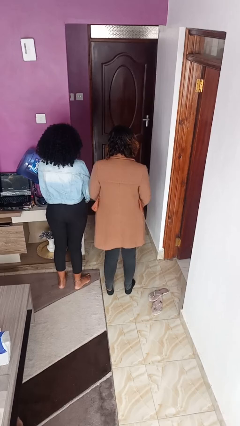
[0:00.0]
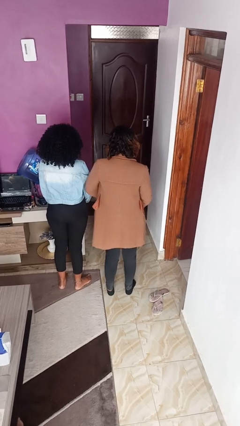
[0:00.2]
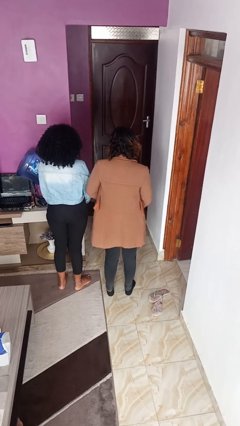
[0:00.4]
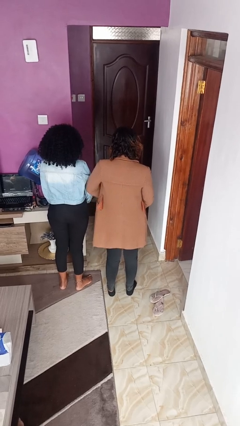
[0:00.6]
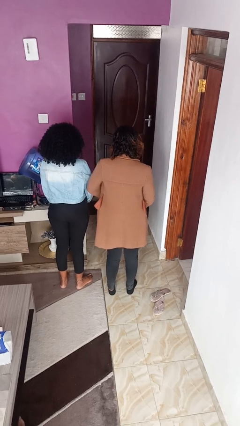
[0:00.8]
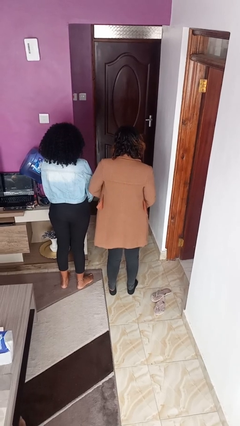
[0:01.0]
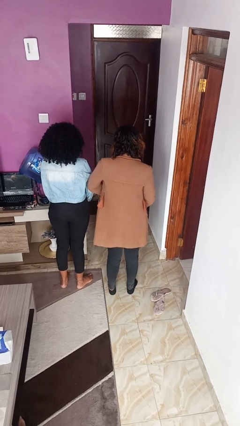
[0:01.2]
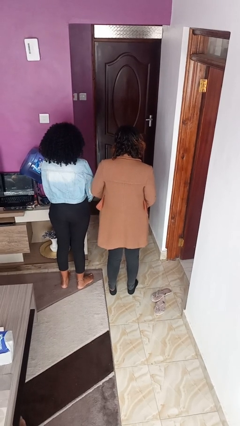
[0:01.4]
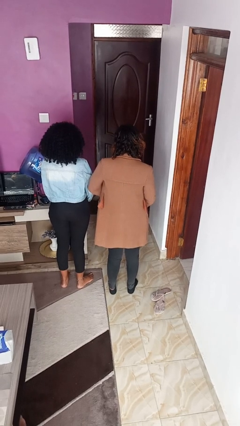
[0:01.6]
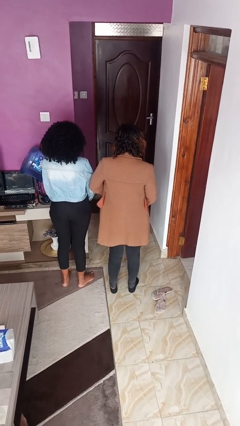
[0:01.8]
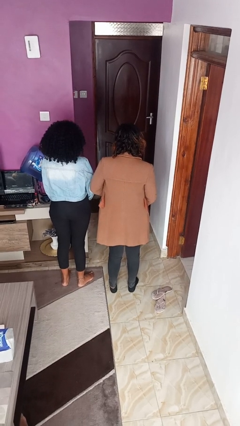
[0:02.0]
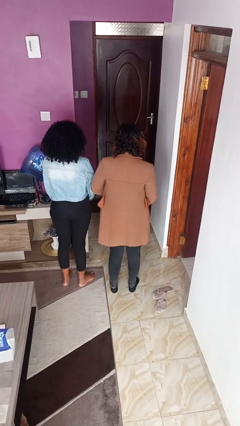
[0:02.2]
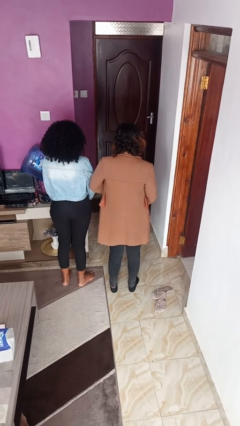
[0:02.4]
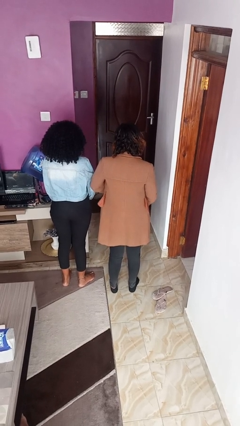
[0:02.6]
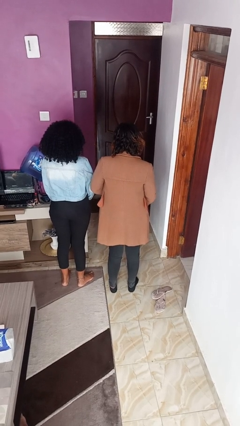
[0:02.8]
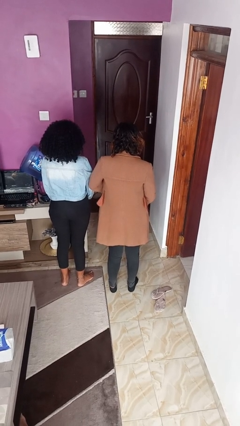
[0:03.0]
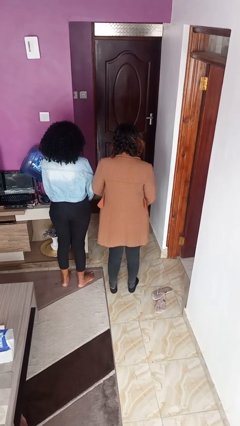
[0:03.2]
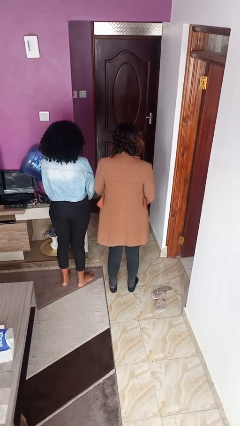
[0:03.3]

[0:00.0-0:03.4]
person nudges person with elbow

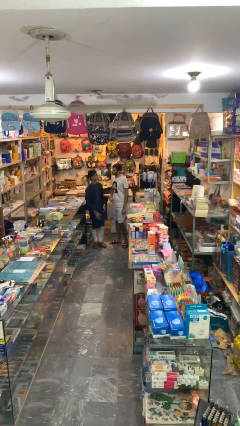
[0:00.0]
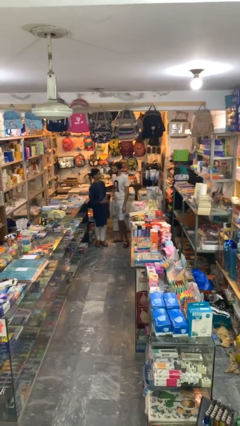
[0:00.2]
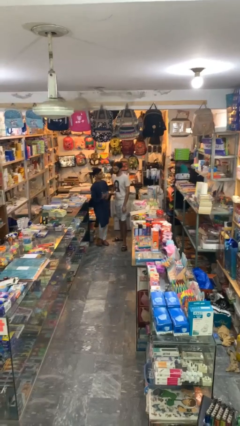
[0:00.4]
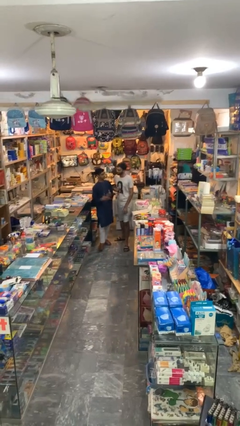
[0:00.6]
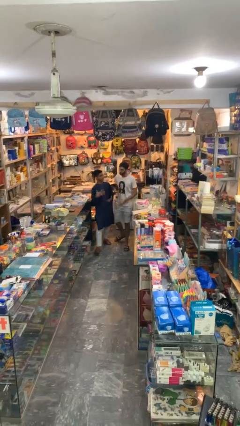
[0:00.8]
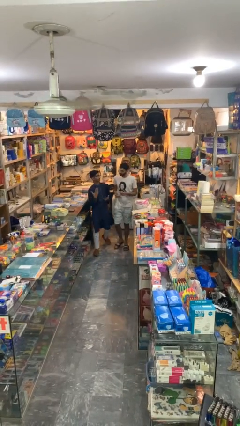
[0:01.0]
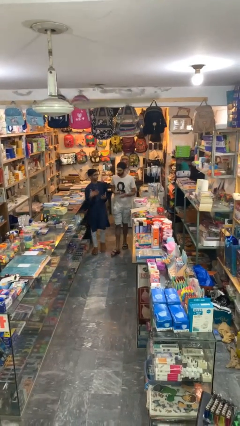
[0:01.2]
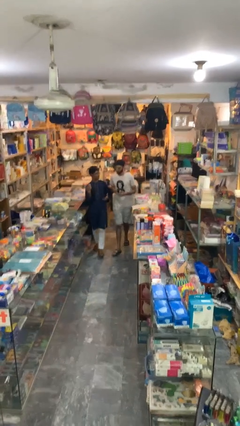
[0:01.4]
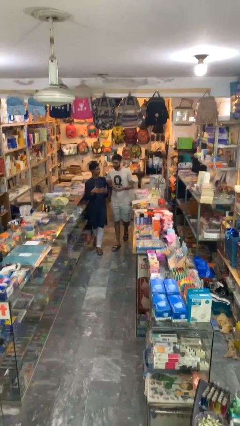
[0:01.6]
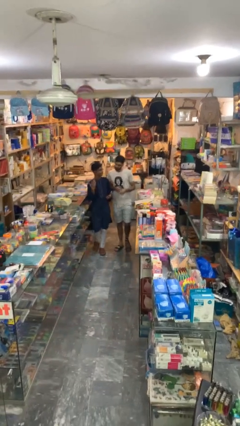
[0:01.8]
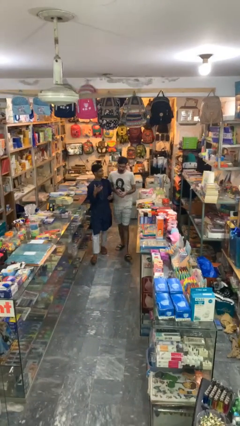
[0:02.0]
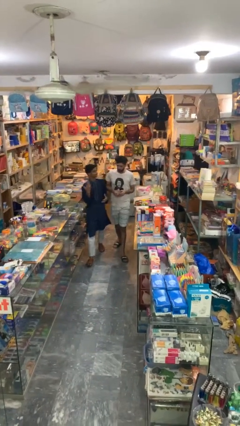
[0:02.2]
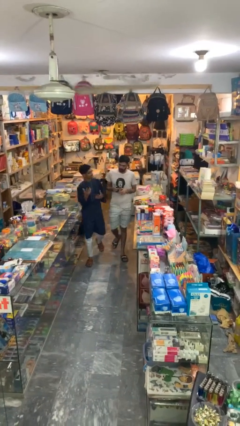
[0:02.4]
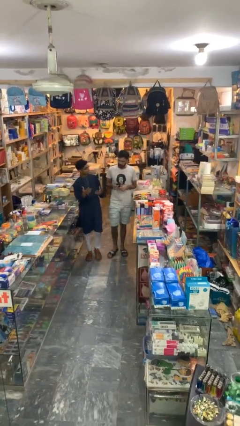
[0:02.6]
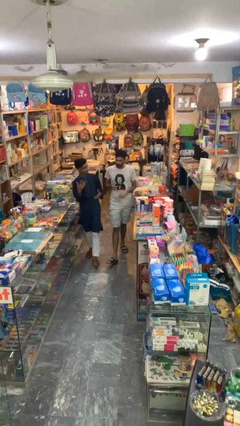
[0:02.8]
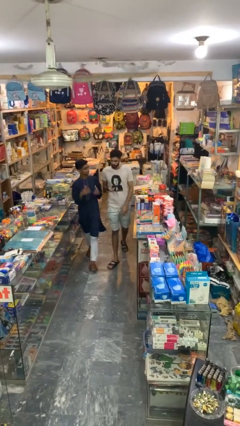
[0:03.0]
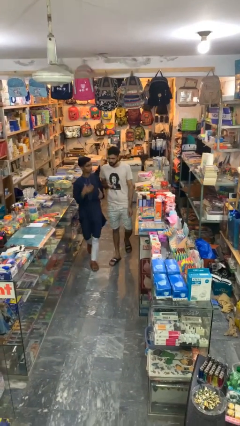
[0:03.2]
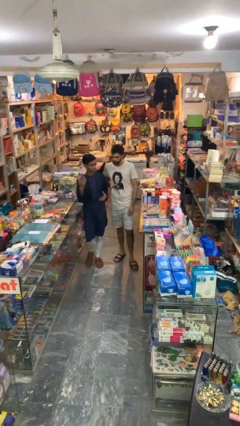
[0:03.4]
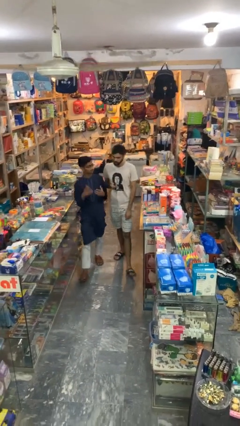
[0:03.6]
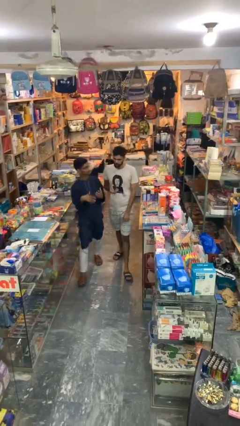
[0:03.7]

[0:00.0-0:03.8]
person talks to person

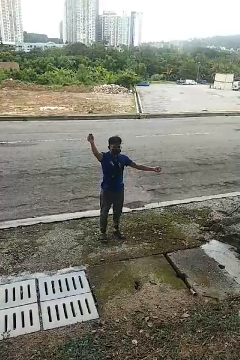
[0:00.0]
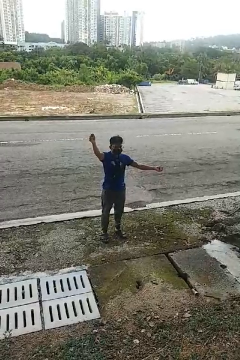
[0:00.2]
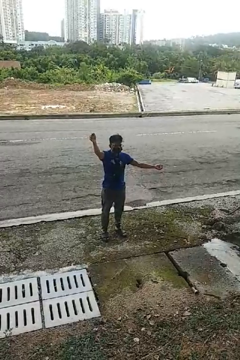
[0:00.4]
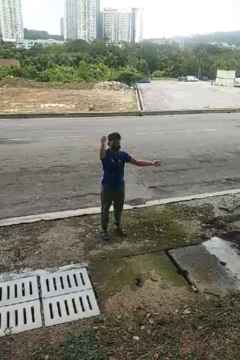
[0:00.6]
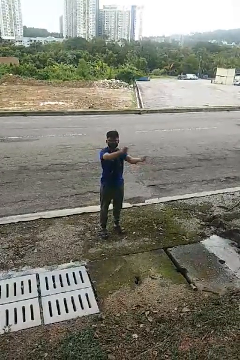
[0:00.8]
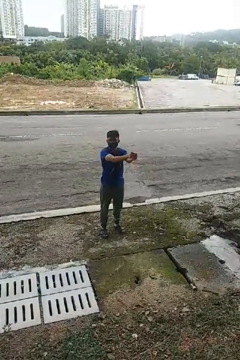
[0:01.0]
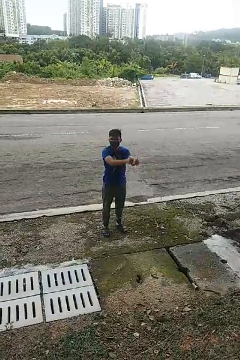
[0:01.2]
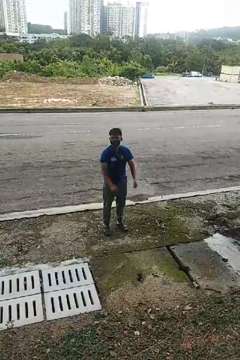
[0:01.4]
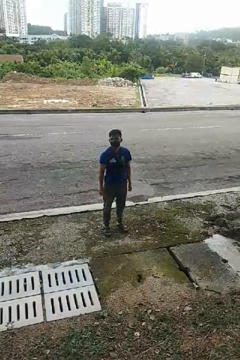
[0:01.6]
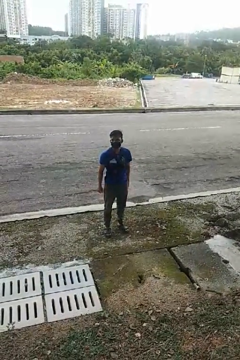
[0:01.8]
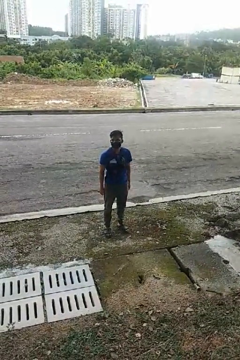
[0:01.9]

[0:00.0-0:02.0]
person gestures zoom out

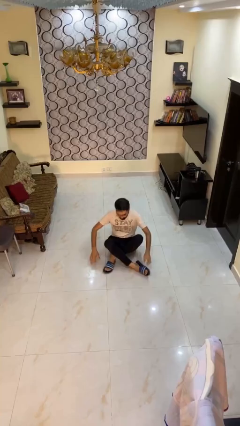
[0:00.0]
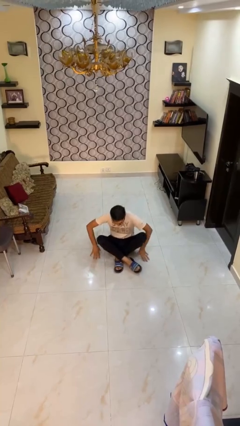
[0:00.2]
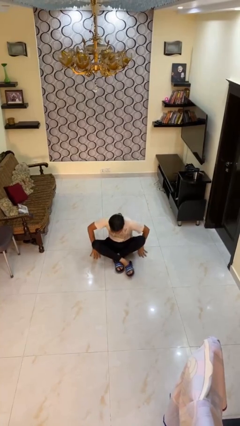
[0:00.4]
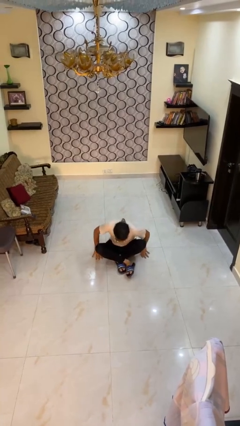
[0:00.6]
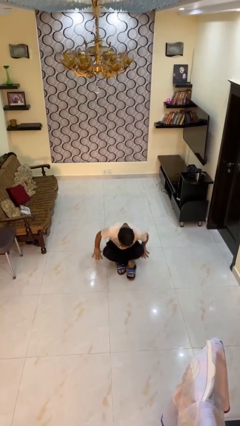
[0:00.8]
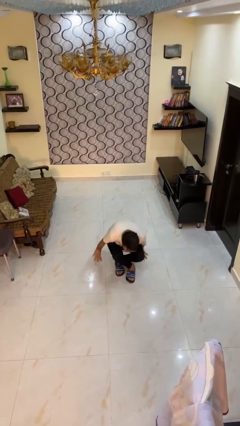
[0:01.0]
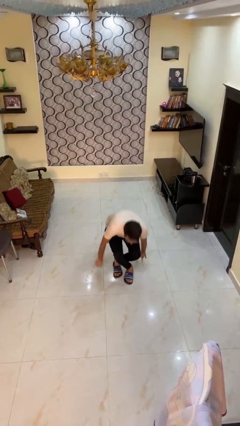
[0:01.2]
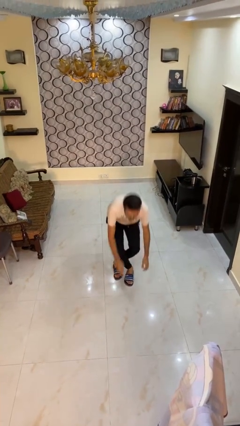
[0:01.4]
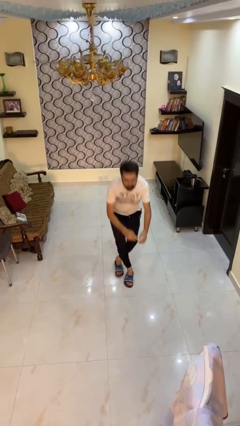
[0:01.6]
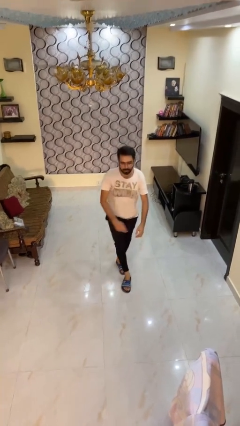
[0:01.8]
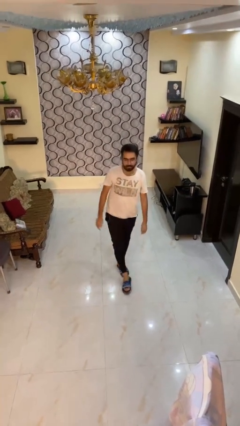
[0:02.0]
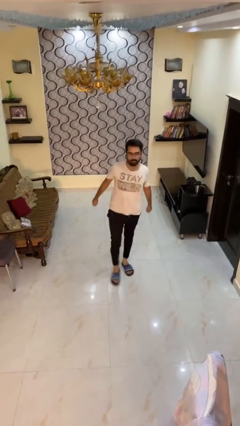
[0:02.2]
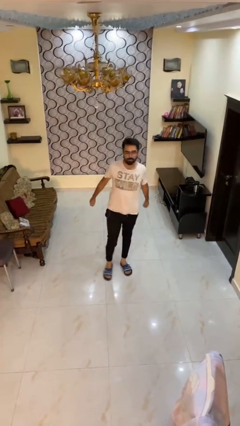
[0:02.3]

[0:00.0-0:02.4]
person stands up from floor

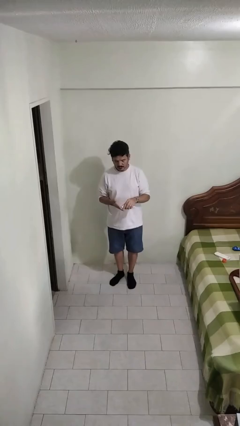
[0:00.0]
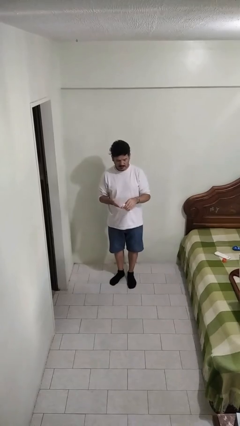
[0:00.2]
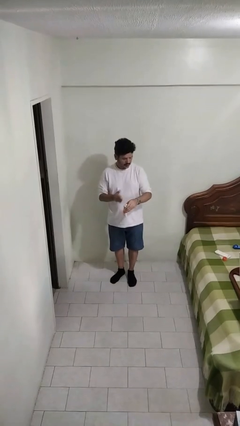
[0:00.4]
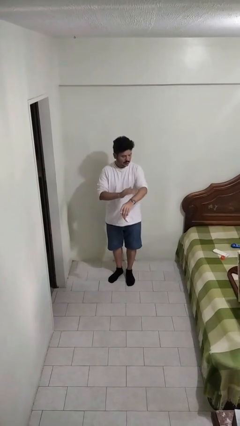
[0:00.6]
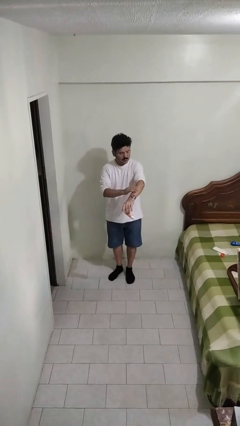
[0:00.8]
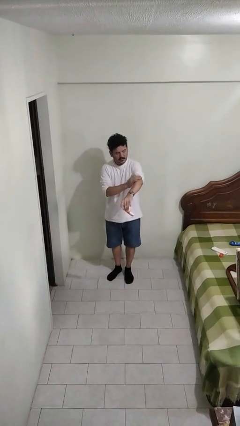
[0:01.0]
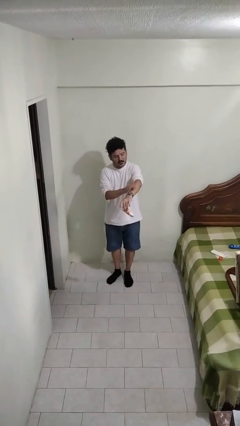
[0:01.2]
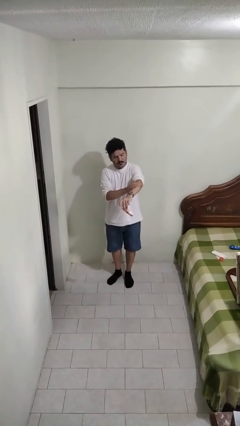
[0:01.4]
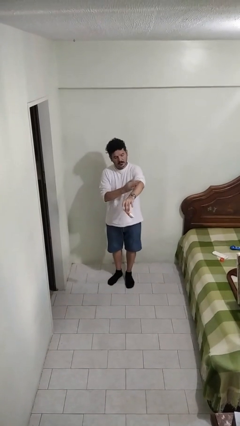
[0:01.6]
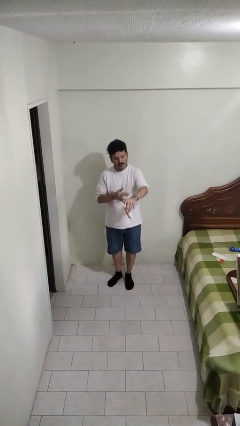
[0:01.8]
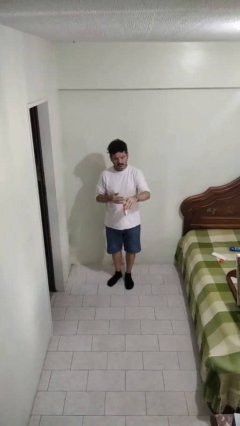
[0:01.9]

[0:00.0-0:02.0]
person applies sunscreen

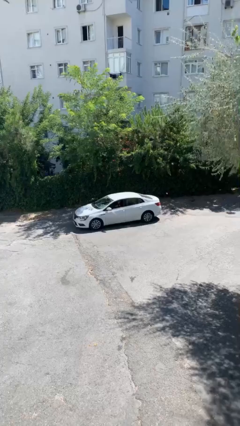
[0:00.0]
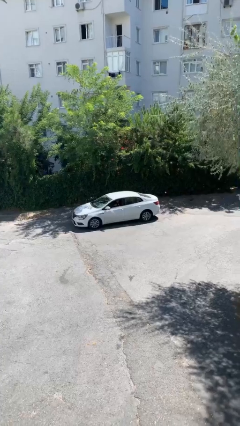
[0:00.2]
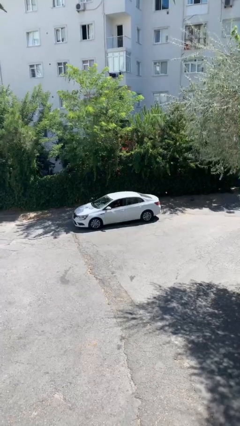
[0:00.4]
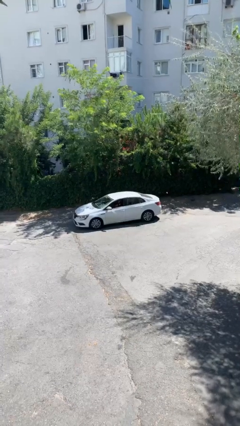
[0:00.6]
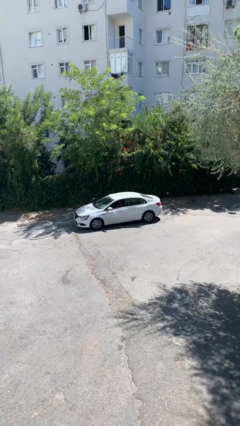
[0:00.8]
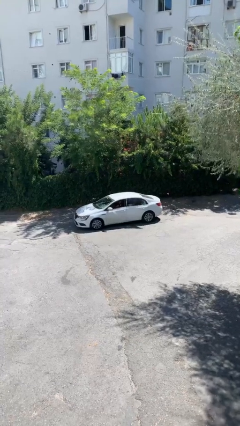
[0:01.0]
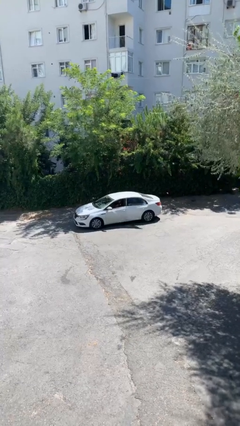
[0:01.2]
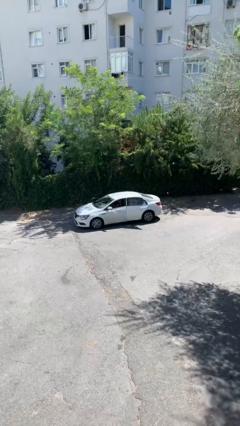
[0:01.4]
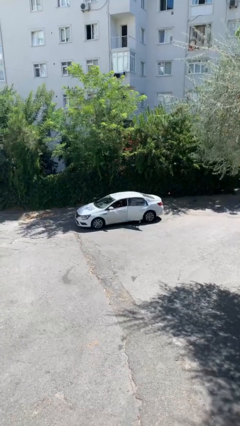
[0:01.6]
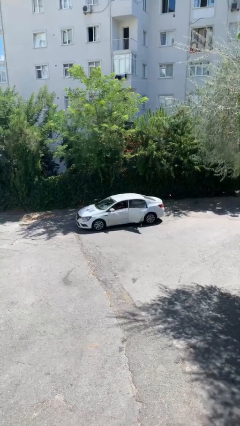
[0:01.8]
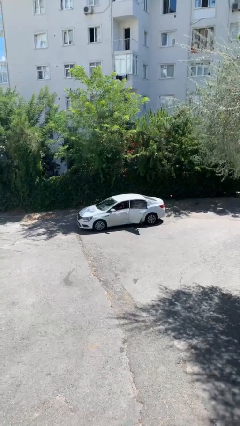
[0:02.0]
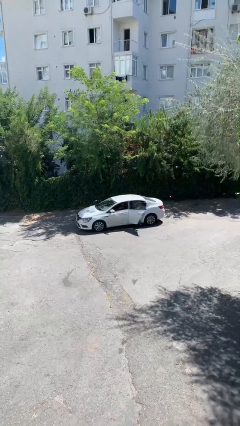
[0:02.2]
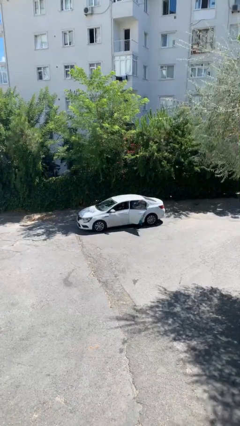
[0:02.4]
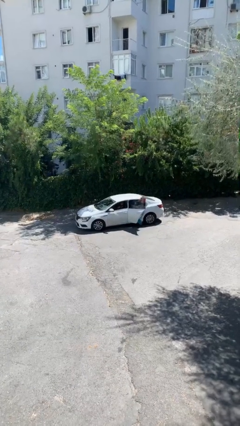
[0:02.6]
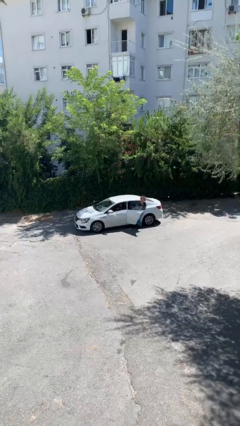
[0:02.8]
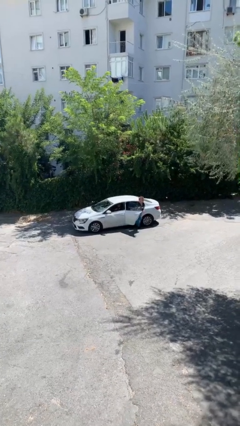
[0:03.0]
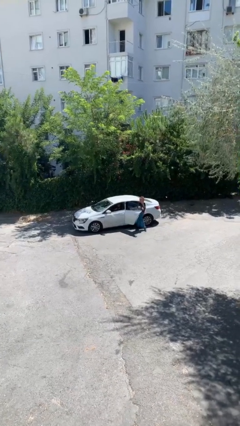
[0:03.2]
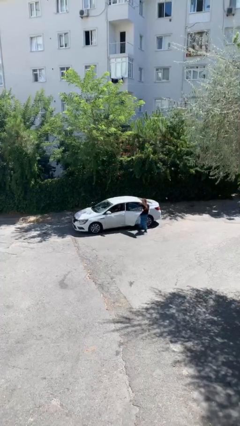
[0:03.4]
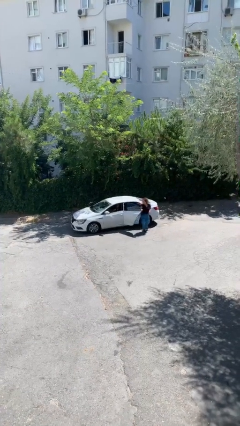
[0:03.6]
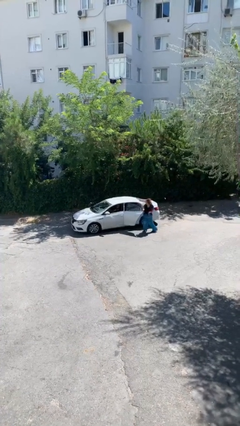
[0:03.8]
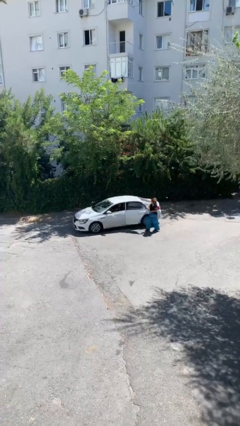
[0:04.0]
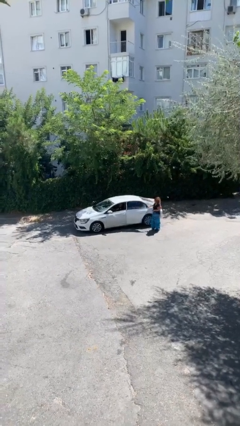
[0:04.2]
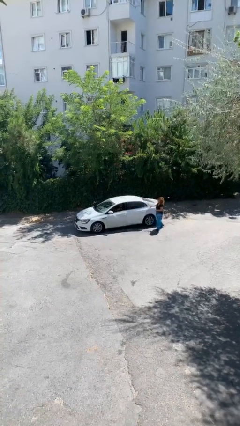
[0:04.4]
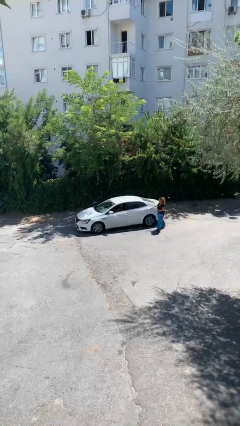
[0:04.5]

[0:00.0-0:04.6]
car drops off person
